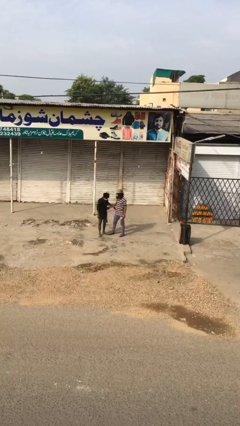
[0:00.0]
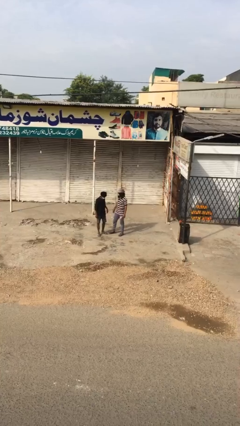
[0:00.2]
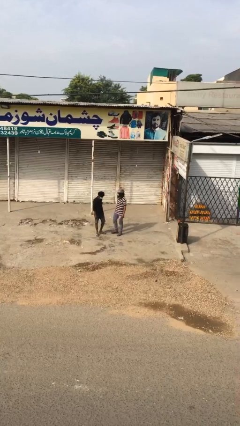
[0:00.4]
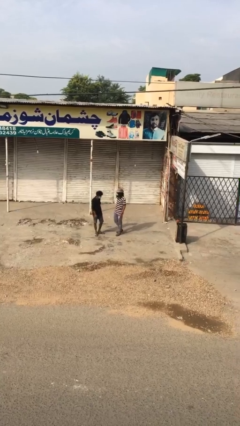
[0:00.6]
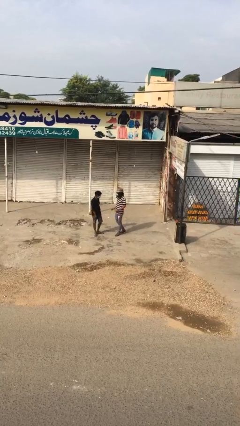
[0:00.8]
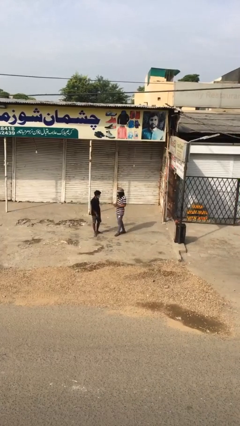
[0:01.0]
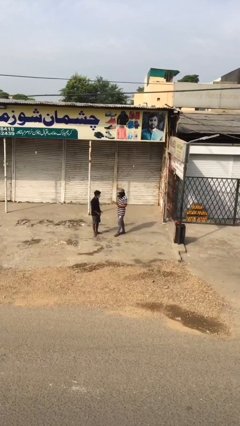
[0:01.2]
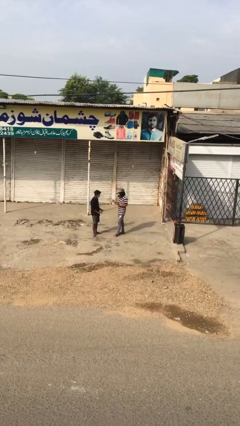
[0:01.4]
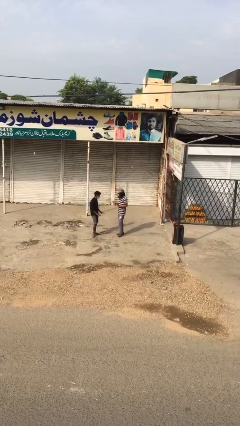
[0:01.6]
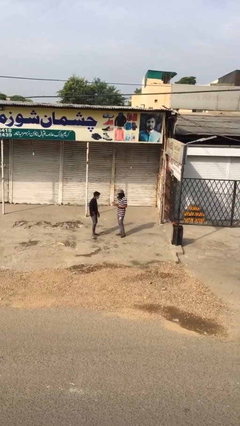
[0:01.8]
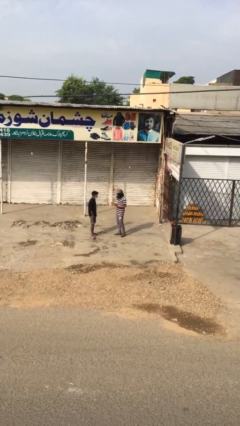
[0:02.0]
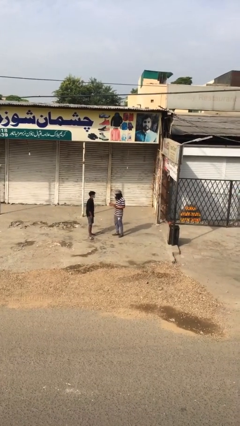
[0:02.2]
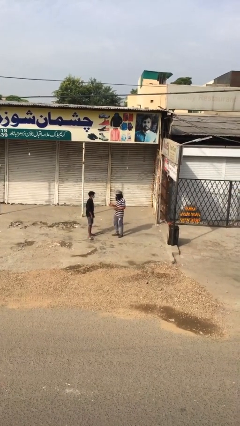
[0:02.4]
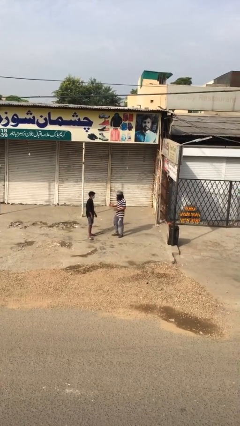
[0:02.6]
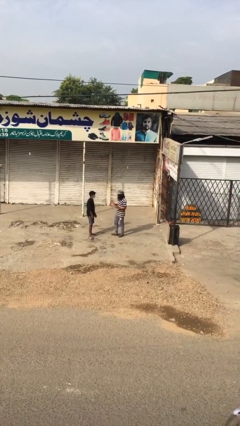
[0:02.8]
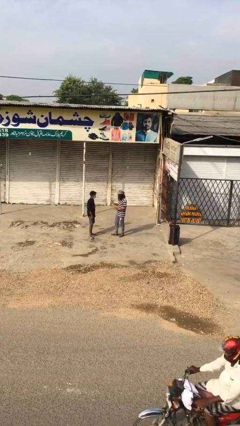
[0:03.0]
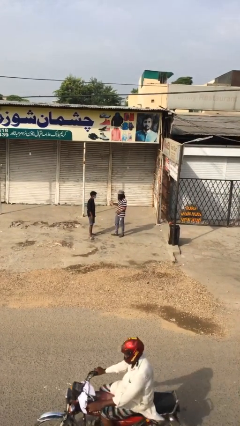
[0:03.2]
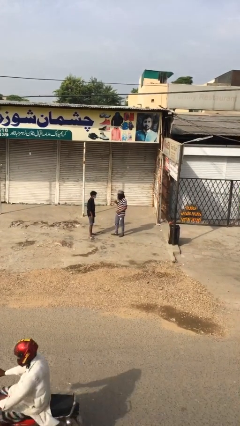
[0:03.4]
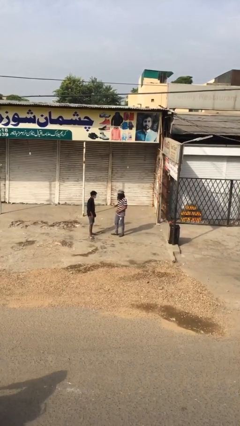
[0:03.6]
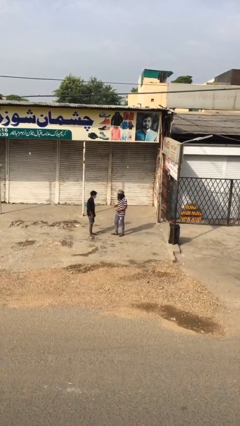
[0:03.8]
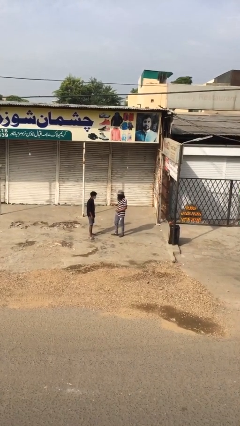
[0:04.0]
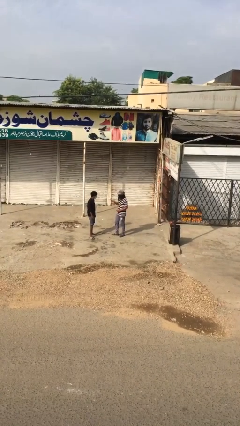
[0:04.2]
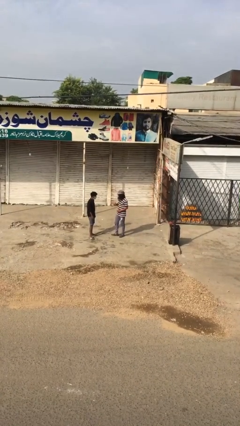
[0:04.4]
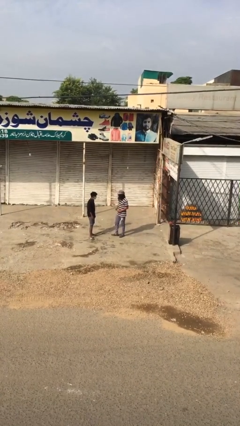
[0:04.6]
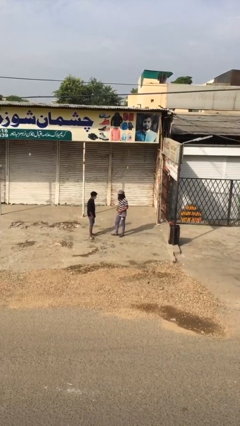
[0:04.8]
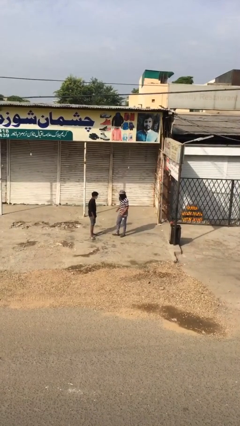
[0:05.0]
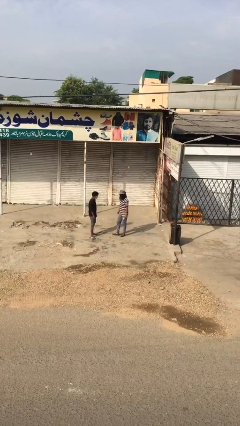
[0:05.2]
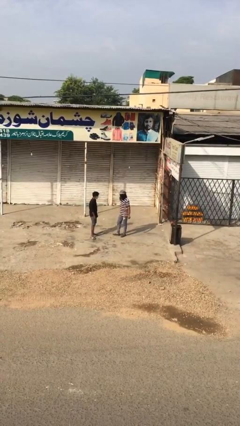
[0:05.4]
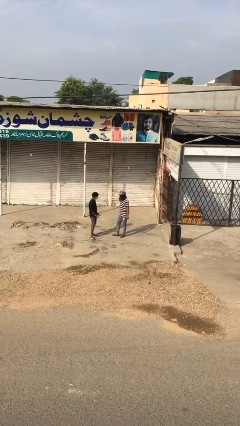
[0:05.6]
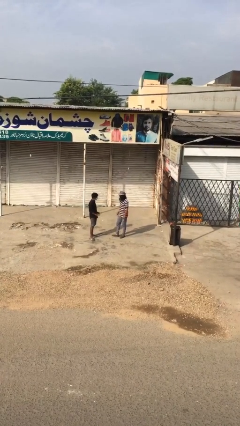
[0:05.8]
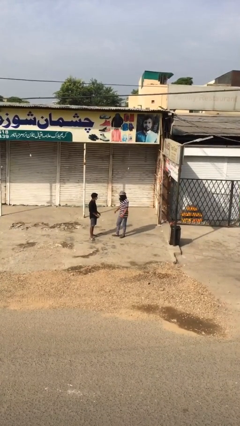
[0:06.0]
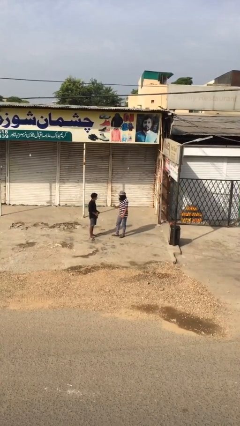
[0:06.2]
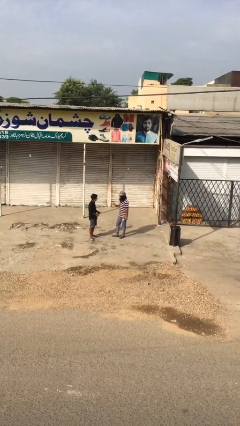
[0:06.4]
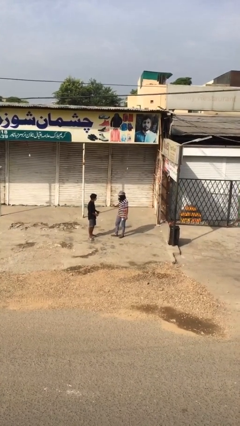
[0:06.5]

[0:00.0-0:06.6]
person talks to person

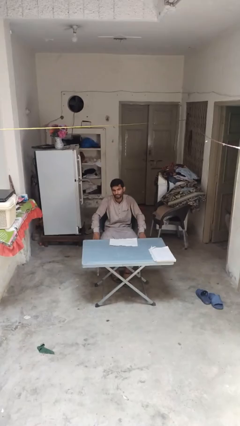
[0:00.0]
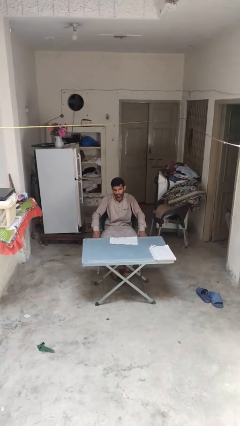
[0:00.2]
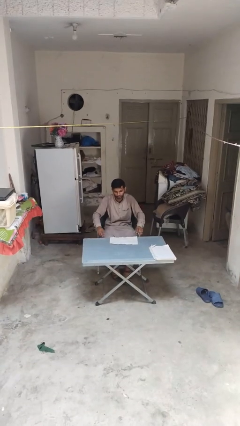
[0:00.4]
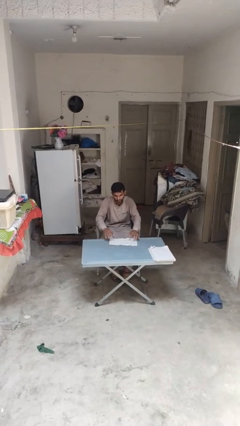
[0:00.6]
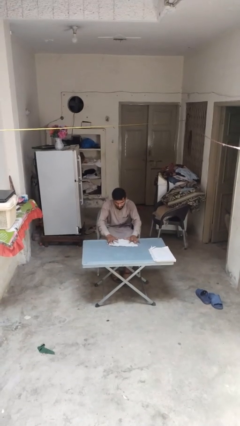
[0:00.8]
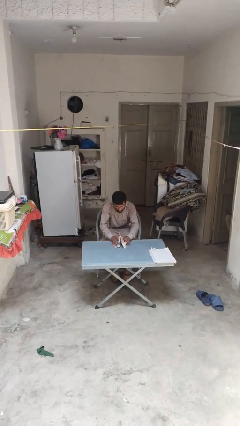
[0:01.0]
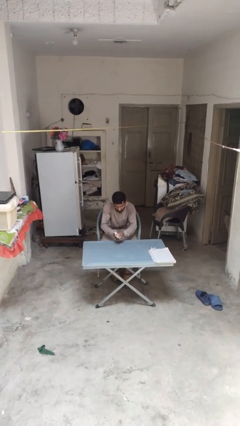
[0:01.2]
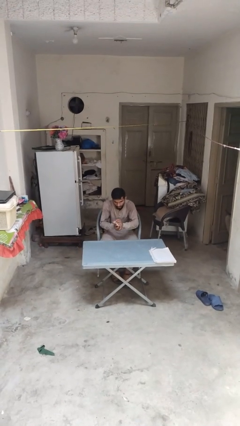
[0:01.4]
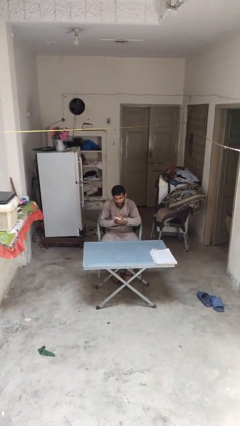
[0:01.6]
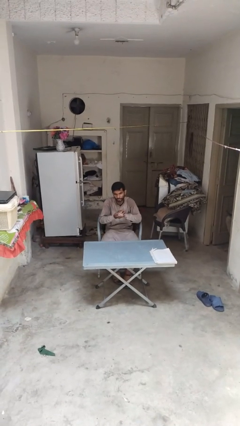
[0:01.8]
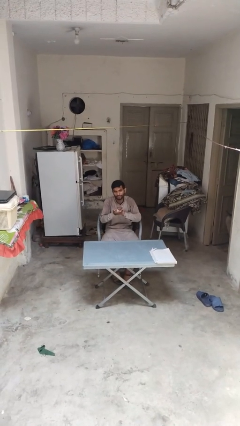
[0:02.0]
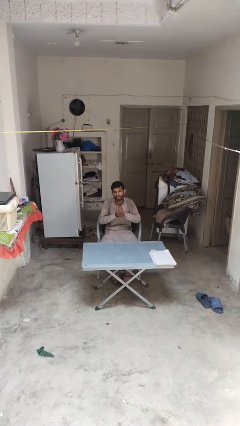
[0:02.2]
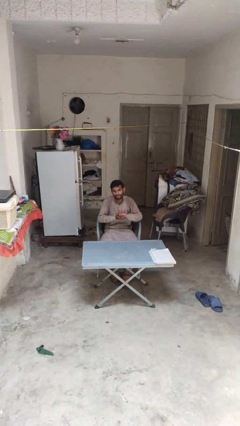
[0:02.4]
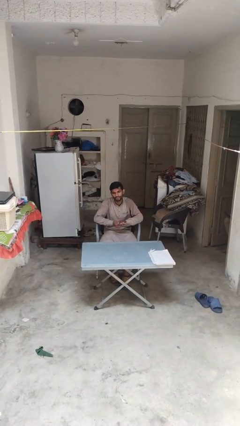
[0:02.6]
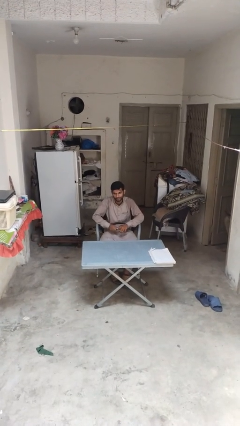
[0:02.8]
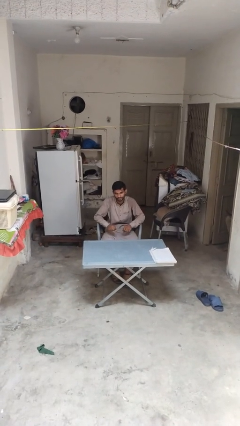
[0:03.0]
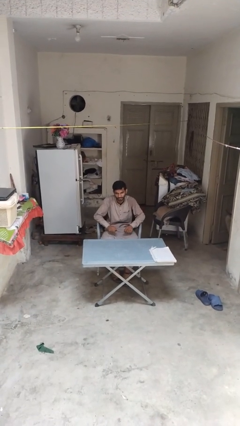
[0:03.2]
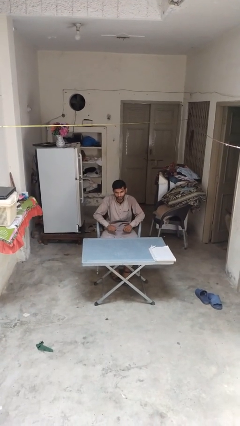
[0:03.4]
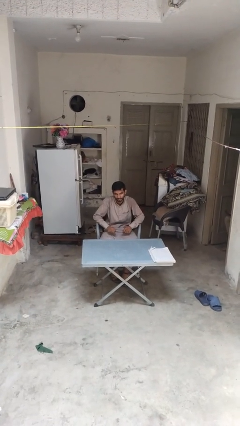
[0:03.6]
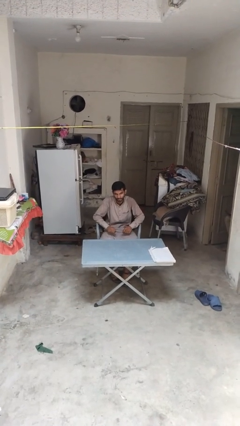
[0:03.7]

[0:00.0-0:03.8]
person crumples paper

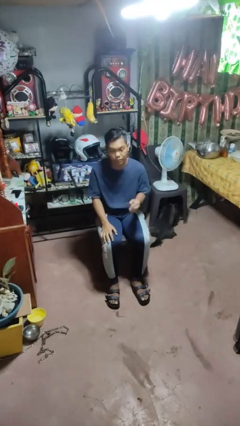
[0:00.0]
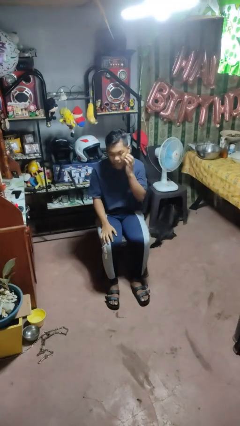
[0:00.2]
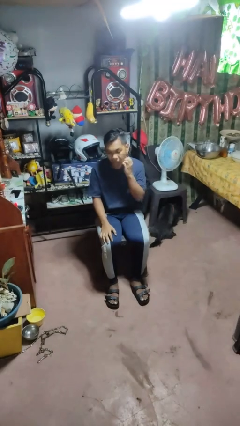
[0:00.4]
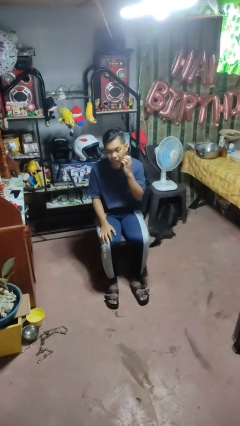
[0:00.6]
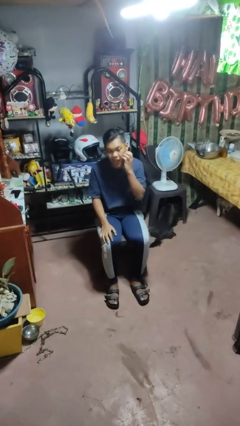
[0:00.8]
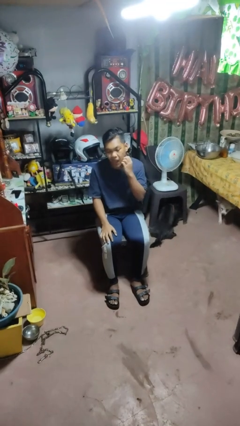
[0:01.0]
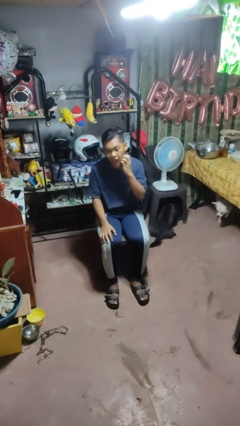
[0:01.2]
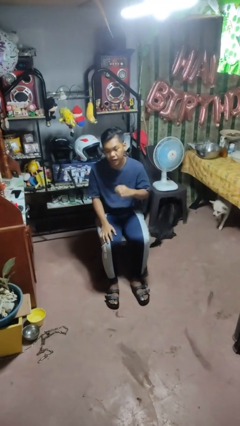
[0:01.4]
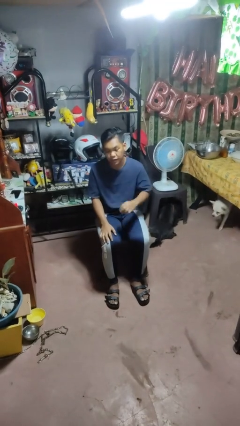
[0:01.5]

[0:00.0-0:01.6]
person scratches face

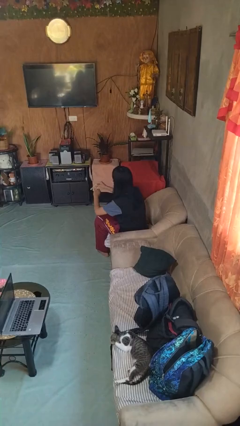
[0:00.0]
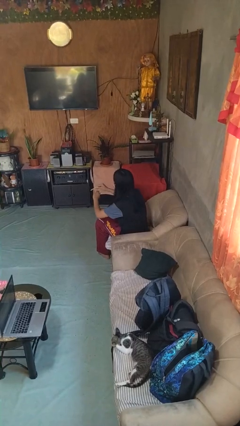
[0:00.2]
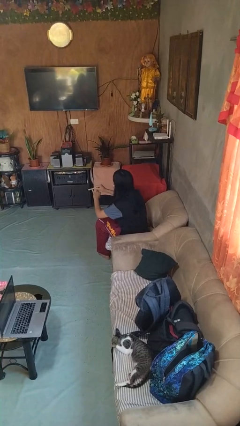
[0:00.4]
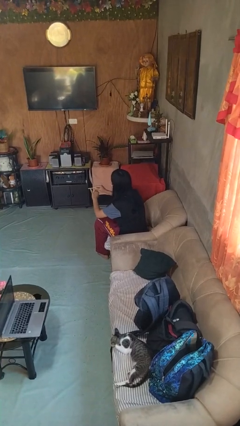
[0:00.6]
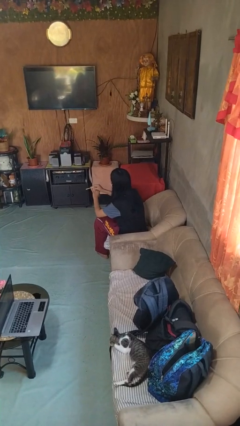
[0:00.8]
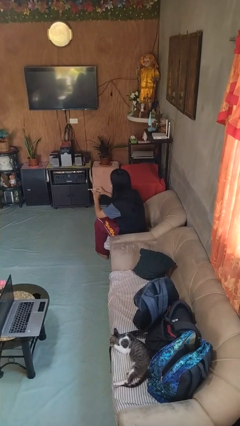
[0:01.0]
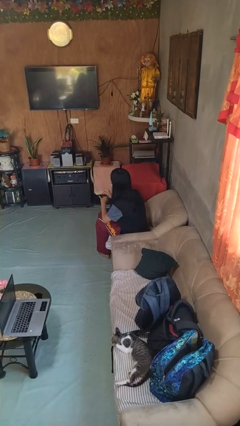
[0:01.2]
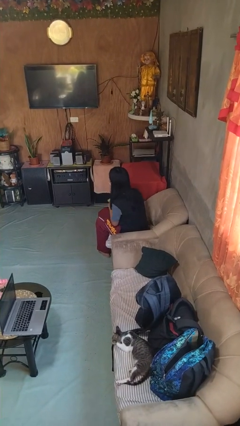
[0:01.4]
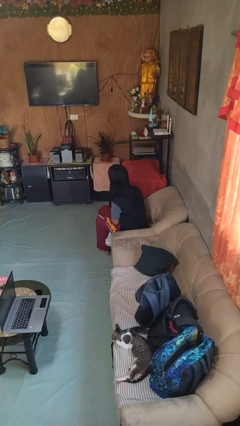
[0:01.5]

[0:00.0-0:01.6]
person files fingernails

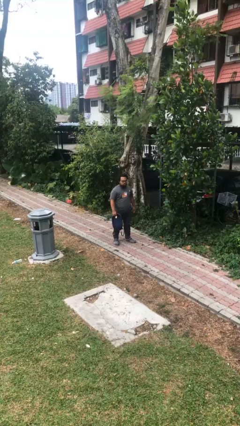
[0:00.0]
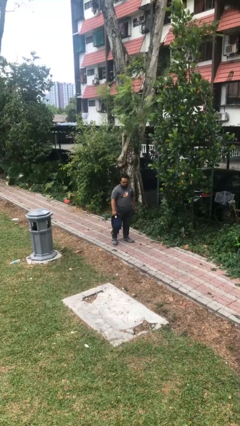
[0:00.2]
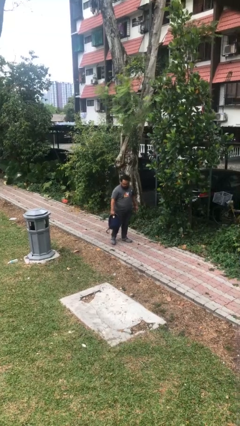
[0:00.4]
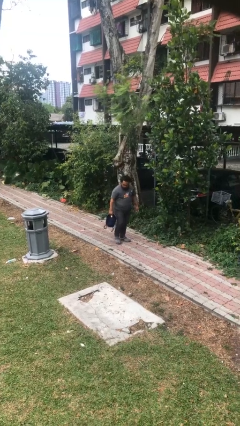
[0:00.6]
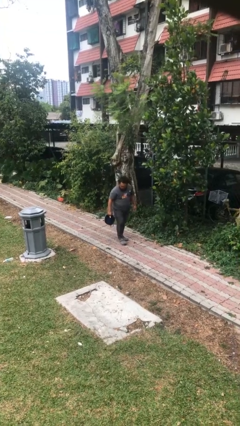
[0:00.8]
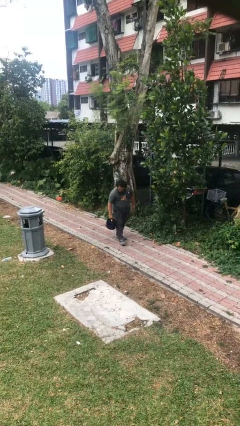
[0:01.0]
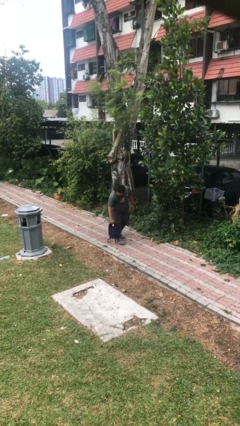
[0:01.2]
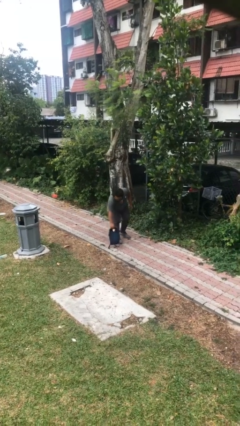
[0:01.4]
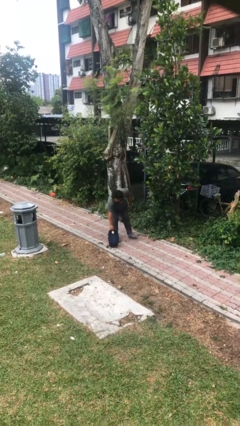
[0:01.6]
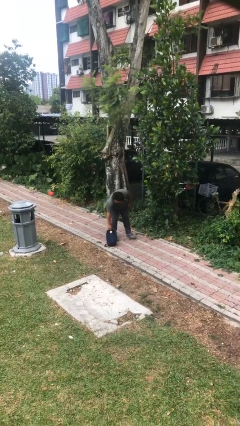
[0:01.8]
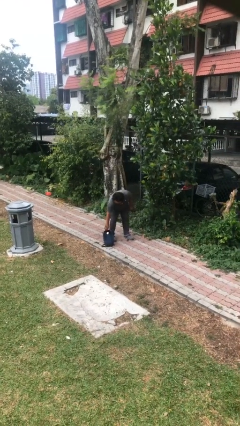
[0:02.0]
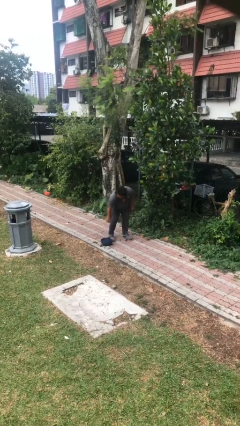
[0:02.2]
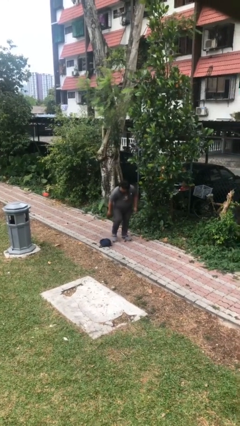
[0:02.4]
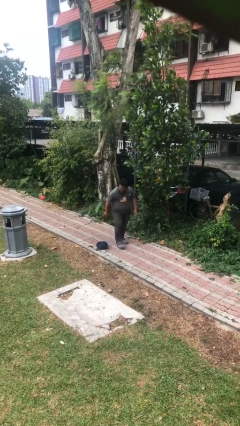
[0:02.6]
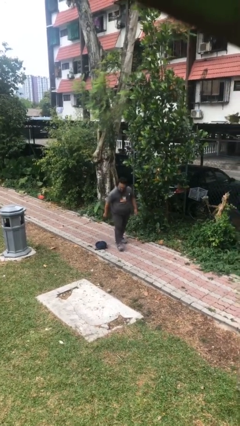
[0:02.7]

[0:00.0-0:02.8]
person puts down object on floor

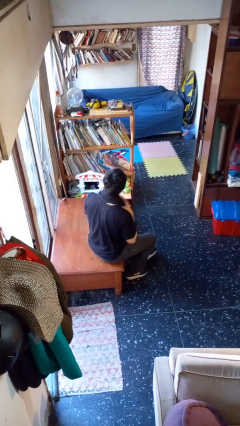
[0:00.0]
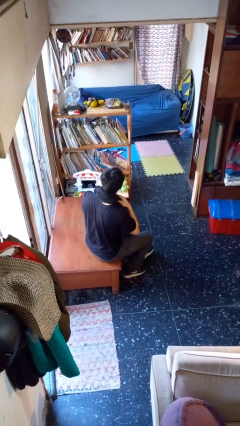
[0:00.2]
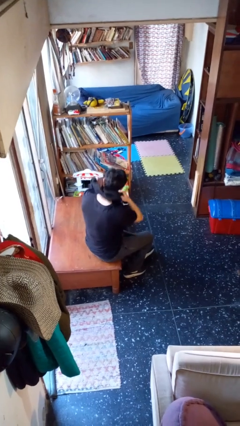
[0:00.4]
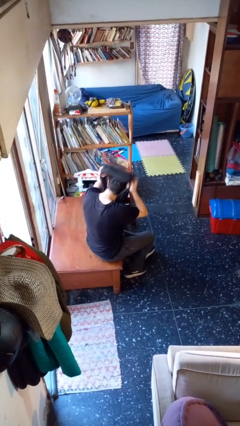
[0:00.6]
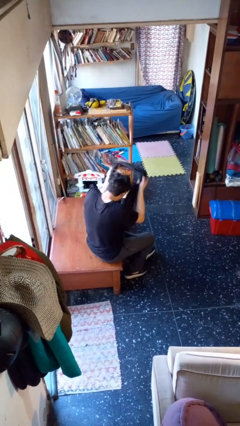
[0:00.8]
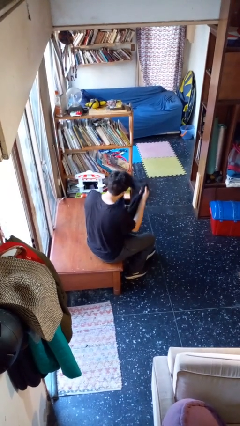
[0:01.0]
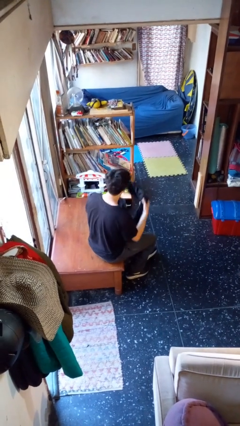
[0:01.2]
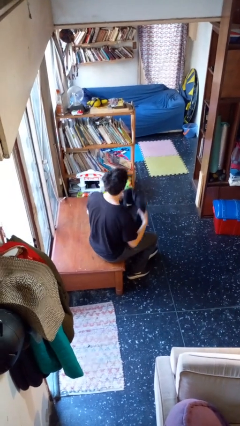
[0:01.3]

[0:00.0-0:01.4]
person takes off scarf
